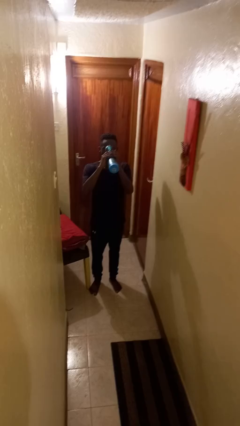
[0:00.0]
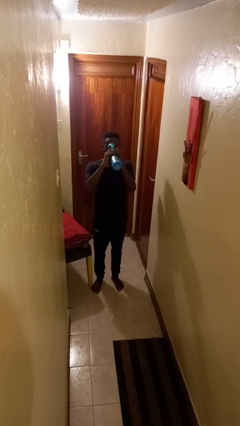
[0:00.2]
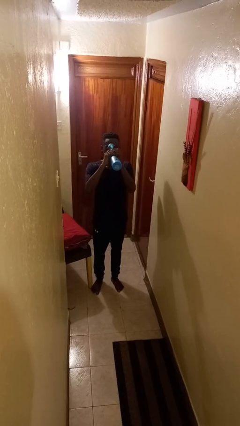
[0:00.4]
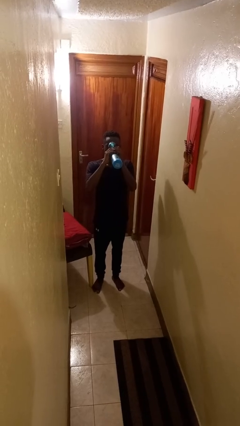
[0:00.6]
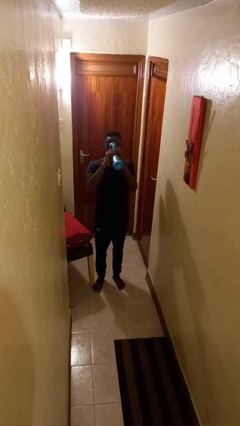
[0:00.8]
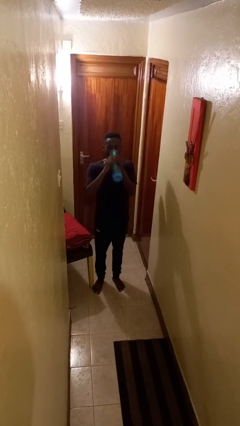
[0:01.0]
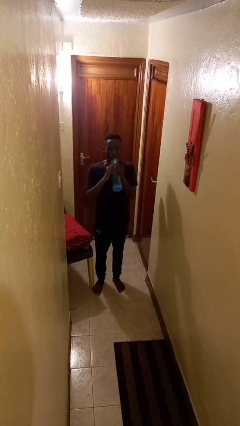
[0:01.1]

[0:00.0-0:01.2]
person drinks from bottle

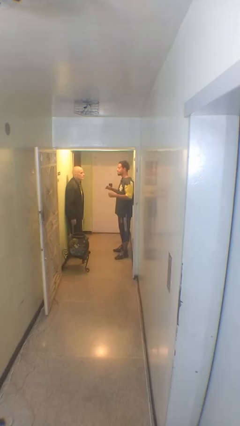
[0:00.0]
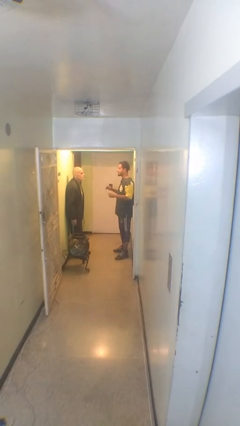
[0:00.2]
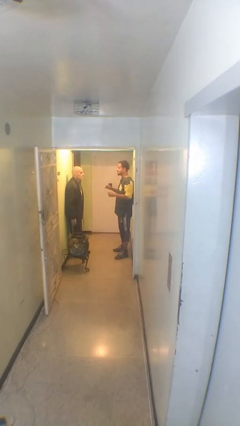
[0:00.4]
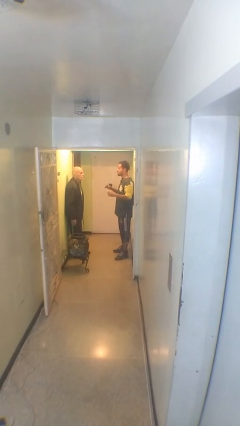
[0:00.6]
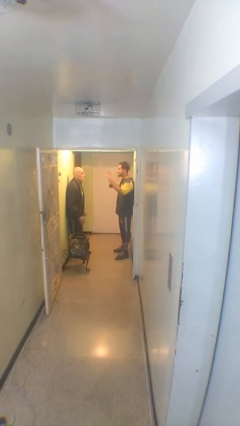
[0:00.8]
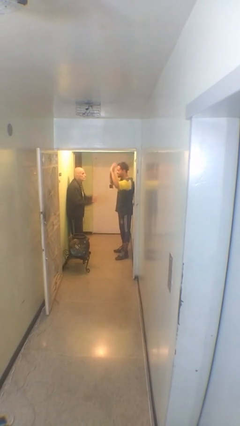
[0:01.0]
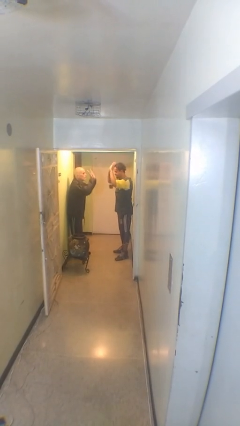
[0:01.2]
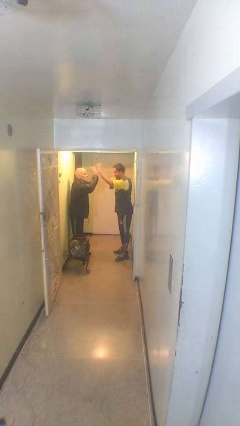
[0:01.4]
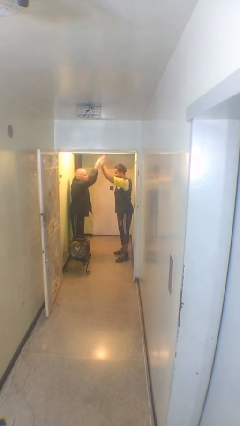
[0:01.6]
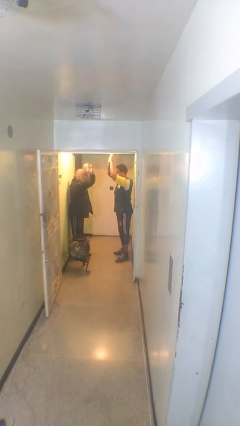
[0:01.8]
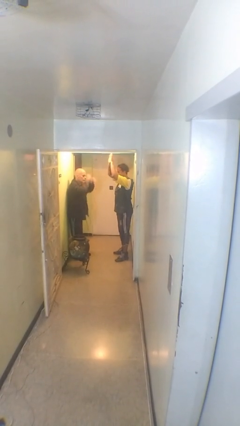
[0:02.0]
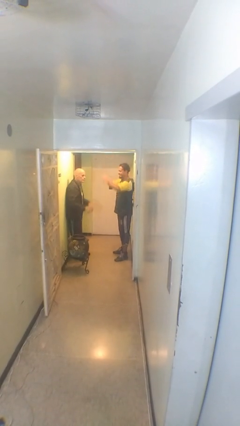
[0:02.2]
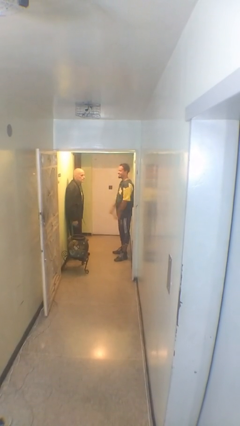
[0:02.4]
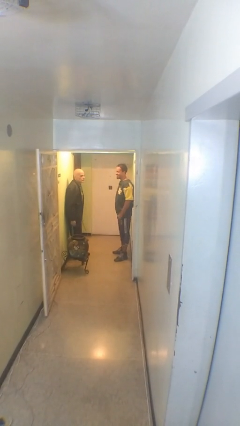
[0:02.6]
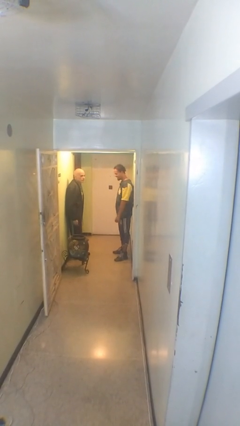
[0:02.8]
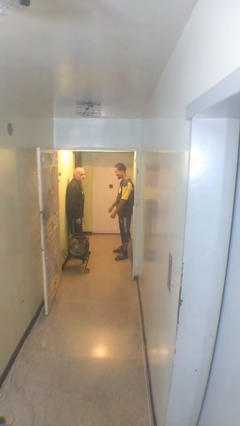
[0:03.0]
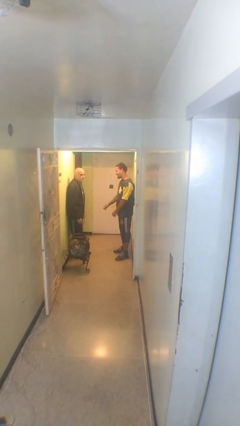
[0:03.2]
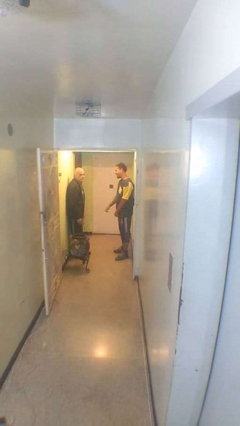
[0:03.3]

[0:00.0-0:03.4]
person highfives hand

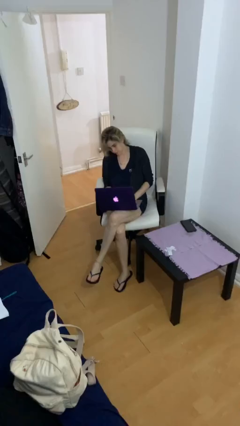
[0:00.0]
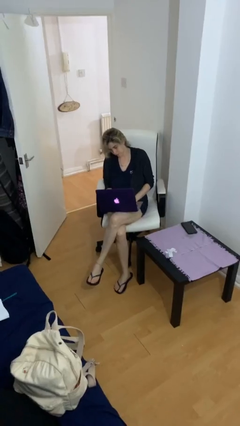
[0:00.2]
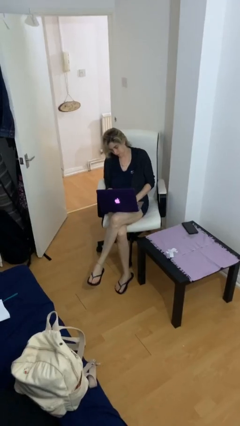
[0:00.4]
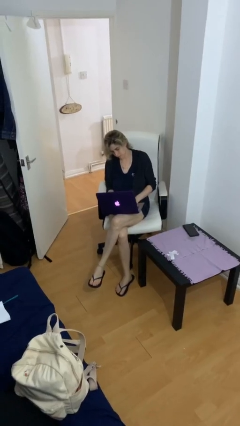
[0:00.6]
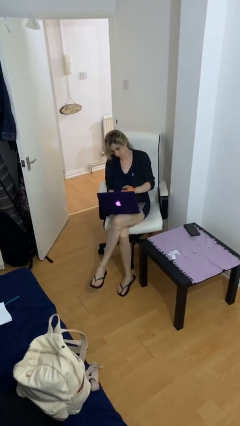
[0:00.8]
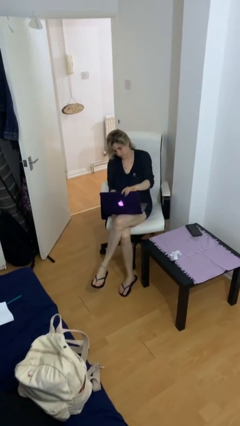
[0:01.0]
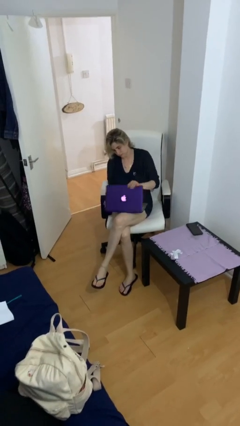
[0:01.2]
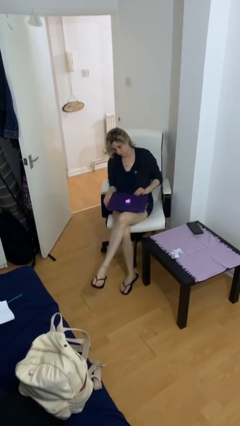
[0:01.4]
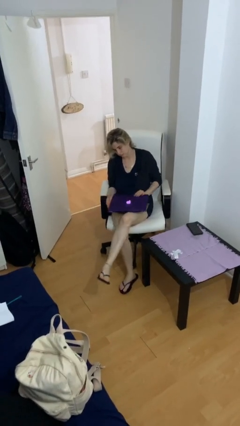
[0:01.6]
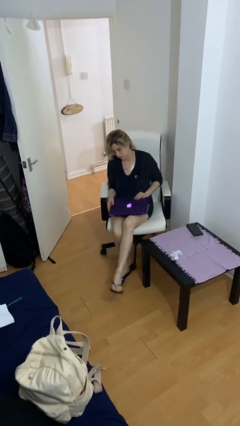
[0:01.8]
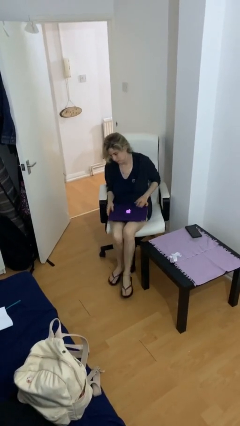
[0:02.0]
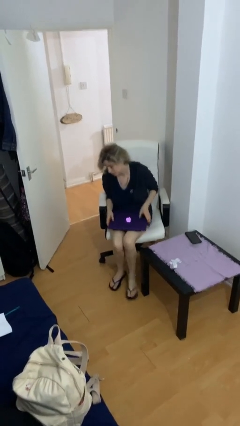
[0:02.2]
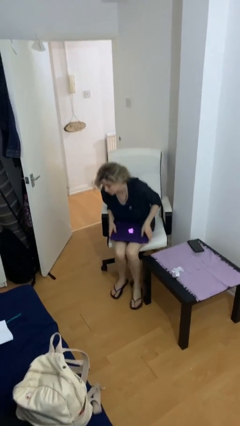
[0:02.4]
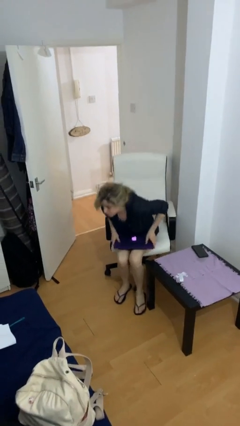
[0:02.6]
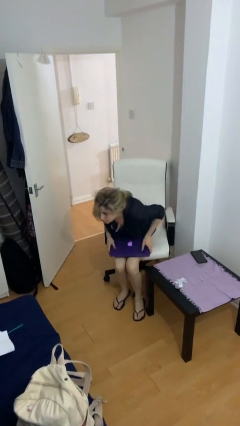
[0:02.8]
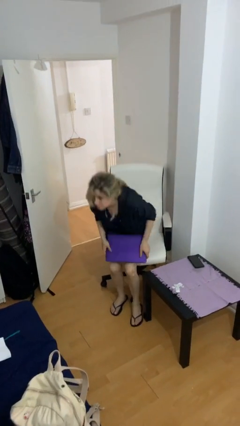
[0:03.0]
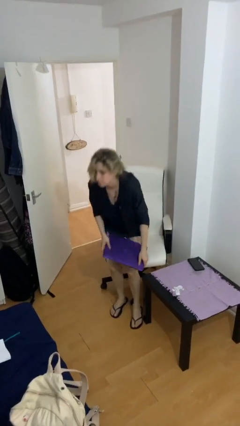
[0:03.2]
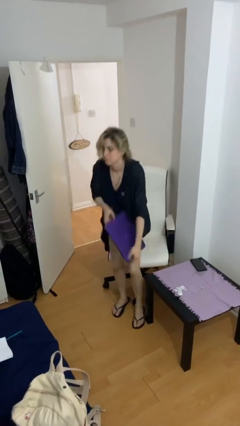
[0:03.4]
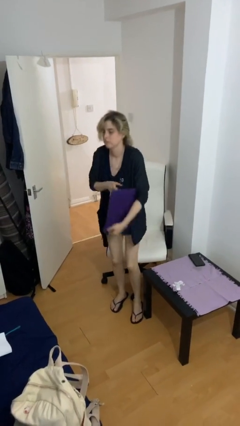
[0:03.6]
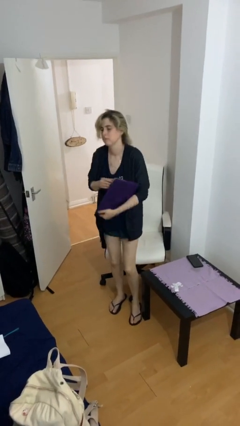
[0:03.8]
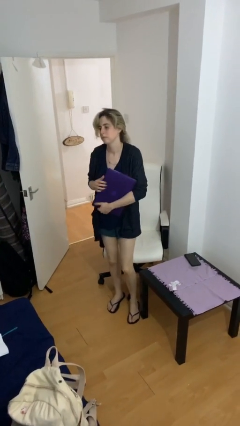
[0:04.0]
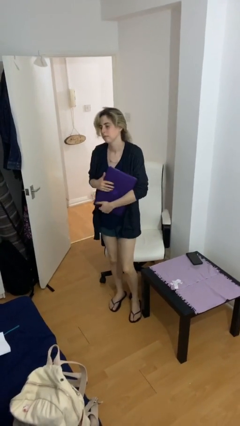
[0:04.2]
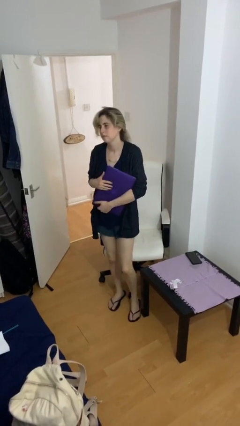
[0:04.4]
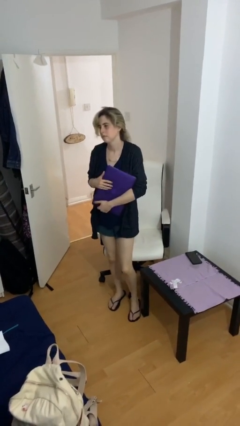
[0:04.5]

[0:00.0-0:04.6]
person stands up

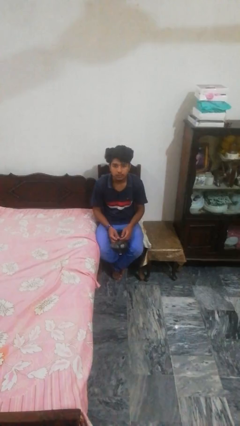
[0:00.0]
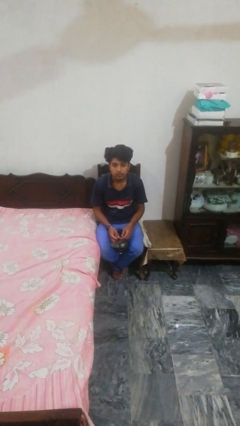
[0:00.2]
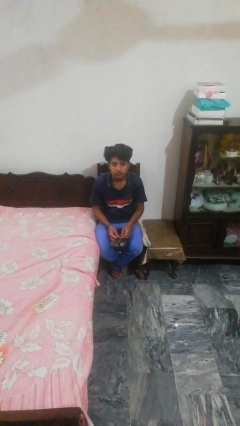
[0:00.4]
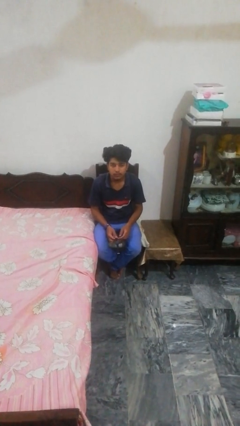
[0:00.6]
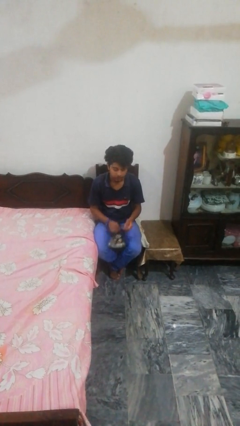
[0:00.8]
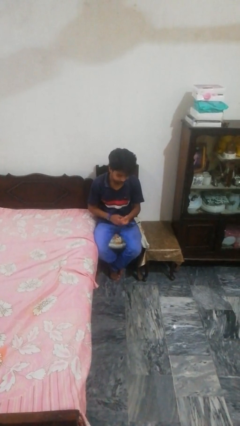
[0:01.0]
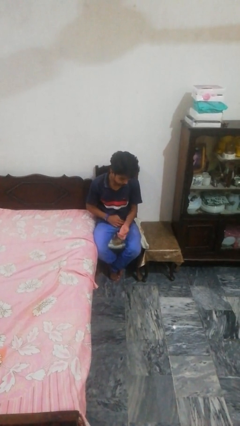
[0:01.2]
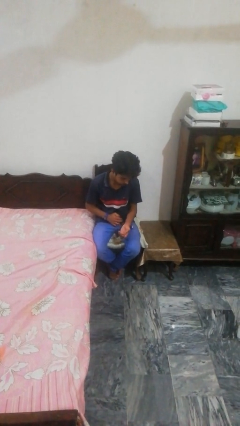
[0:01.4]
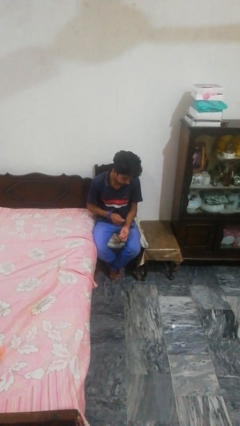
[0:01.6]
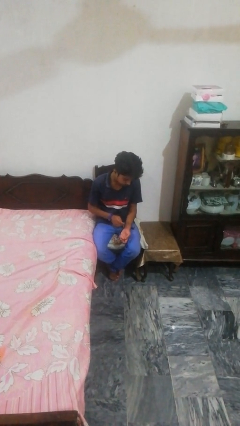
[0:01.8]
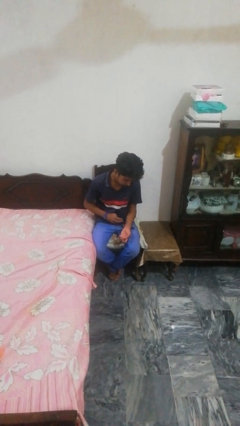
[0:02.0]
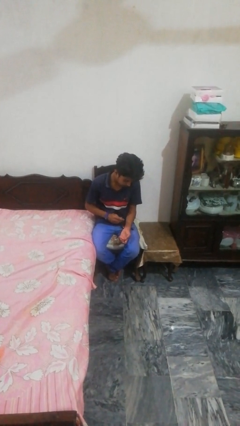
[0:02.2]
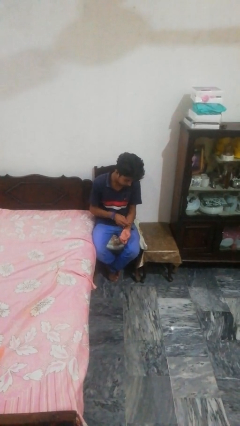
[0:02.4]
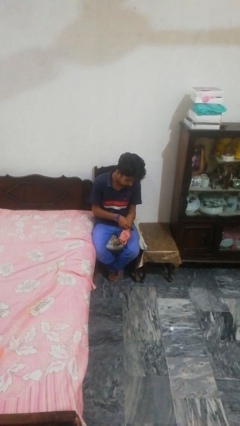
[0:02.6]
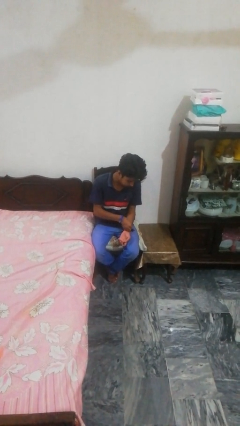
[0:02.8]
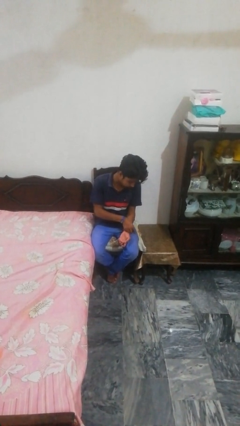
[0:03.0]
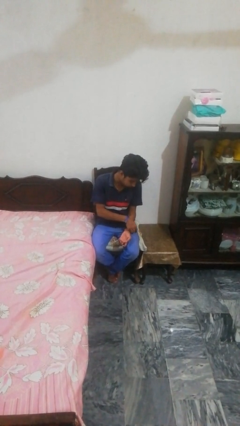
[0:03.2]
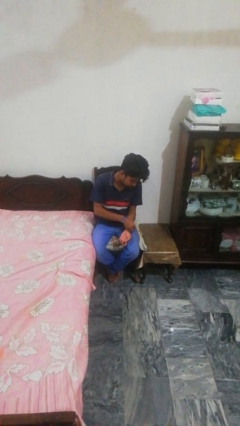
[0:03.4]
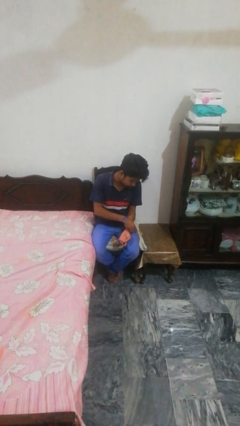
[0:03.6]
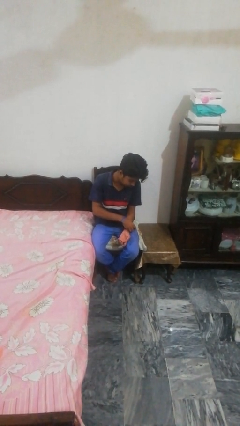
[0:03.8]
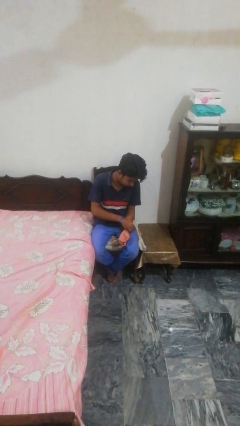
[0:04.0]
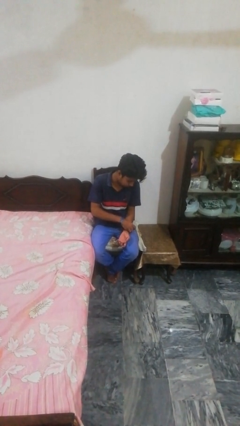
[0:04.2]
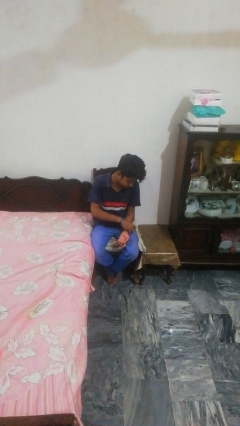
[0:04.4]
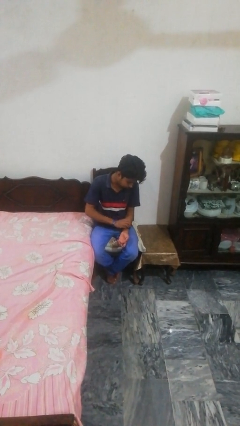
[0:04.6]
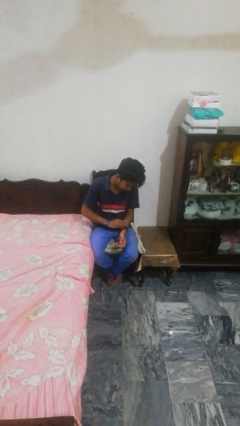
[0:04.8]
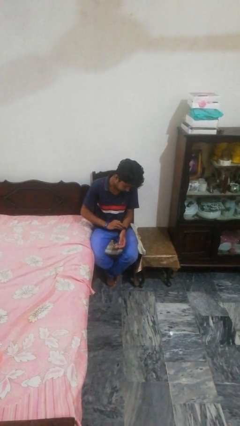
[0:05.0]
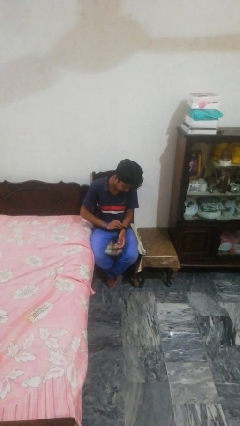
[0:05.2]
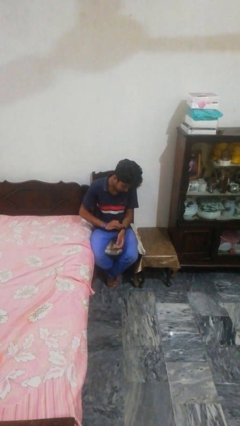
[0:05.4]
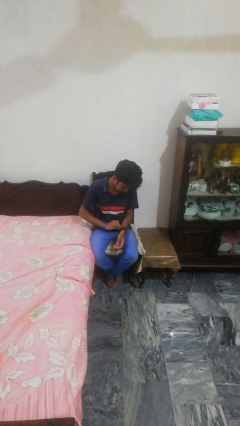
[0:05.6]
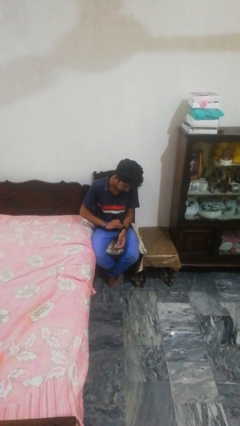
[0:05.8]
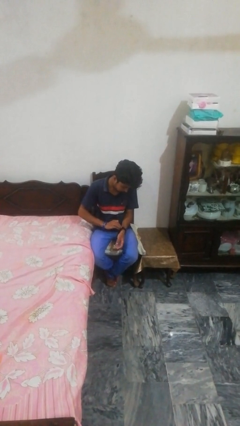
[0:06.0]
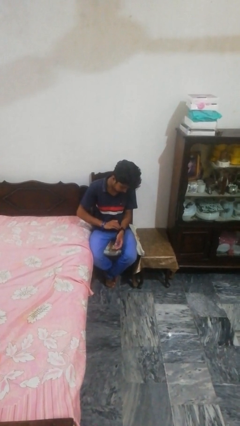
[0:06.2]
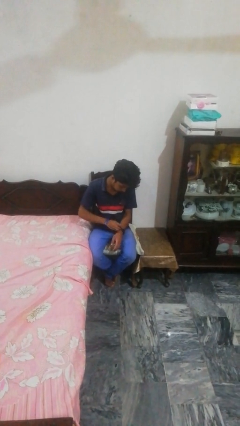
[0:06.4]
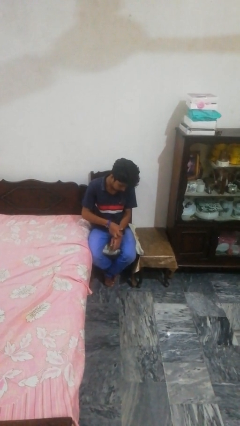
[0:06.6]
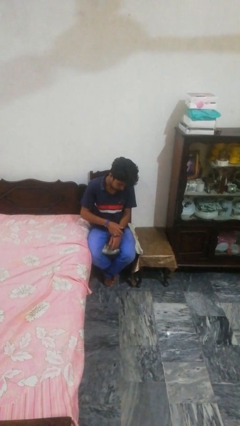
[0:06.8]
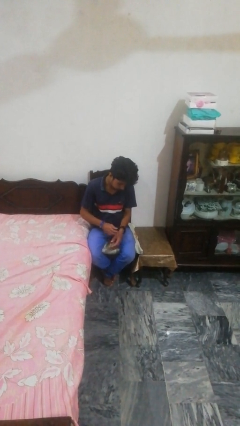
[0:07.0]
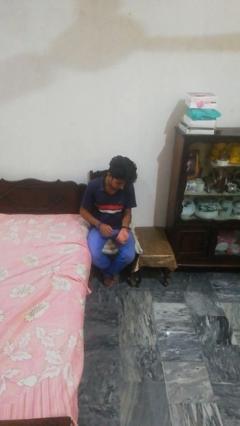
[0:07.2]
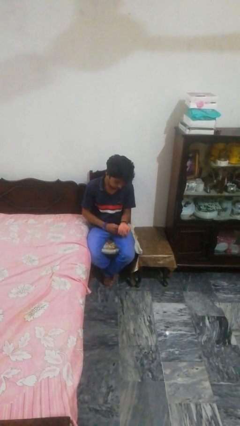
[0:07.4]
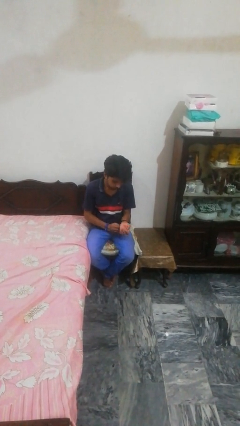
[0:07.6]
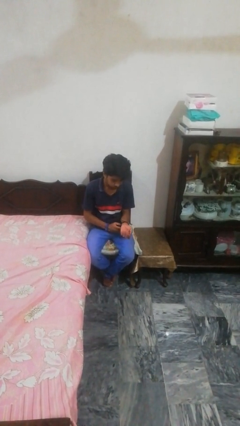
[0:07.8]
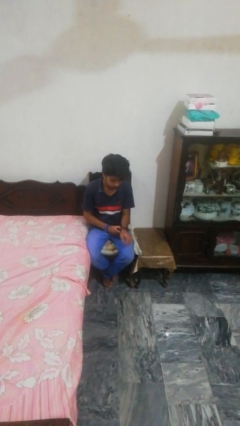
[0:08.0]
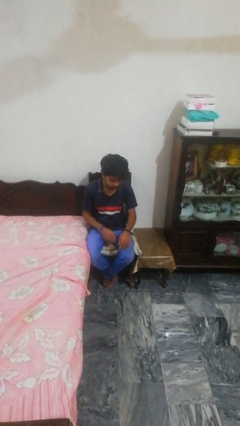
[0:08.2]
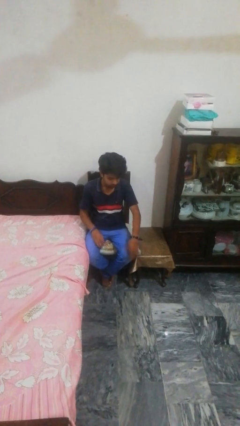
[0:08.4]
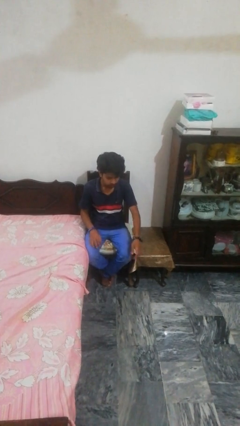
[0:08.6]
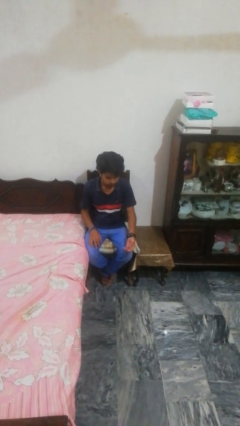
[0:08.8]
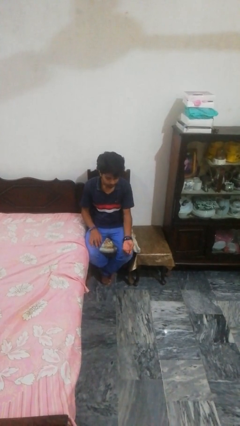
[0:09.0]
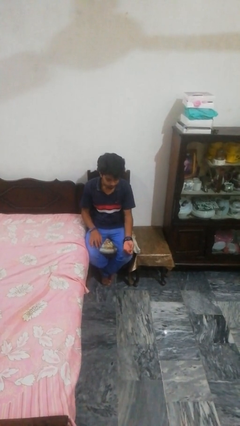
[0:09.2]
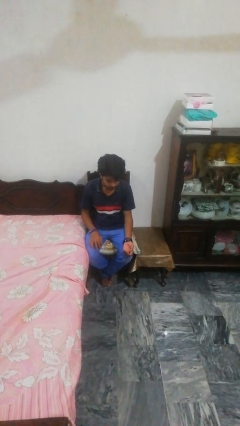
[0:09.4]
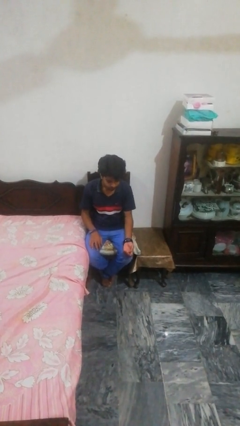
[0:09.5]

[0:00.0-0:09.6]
person puts on wristwatch
